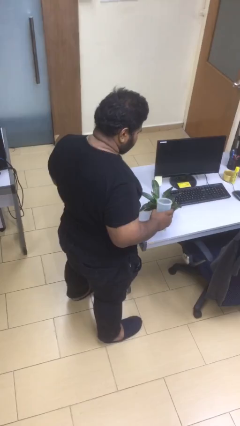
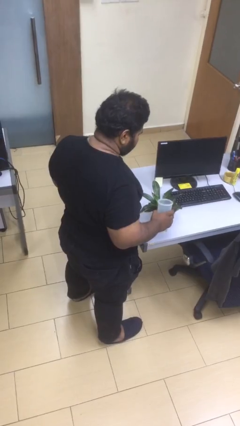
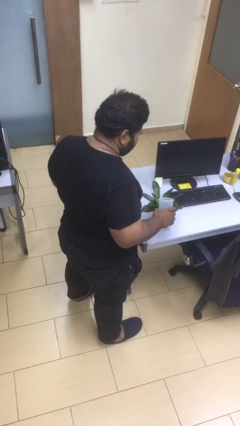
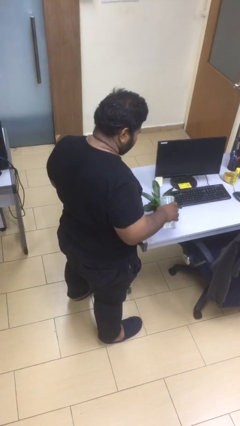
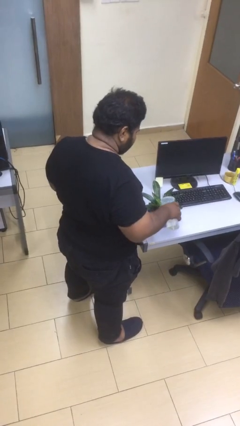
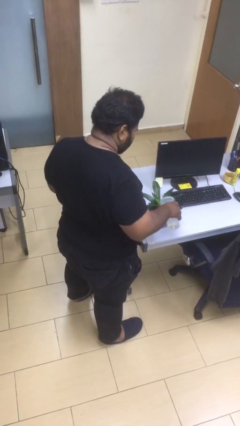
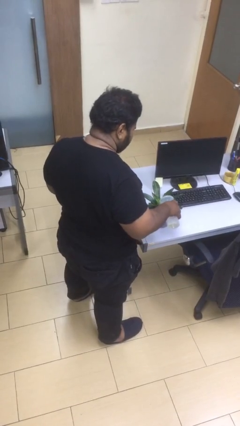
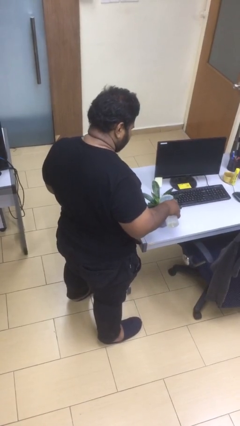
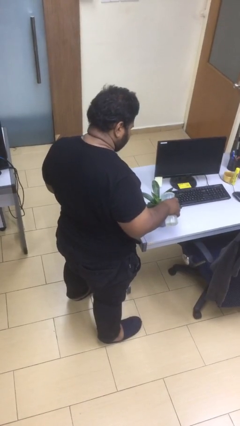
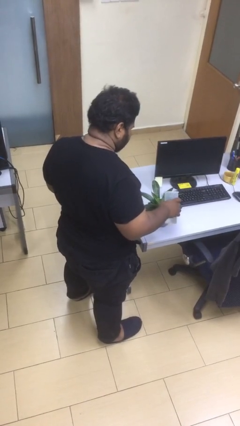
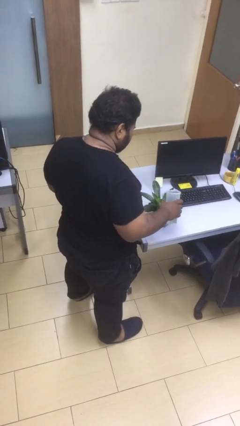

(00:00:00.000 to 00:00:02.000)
person waters houseplant

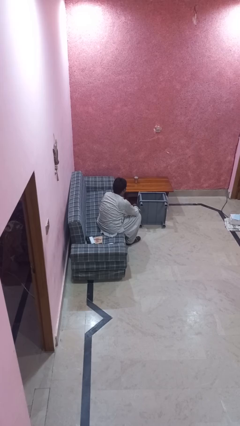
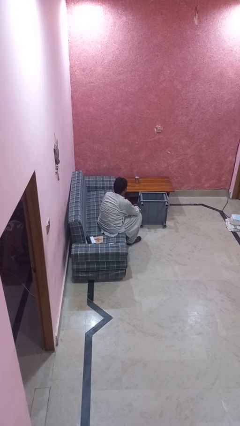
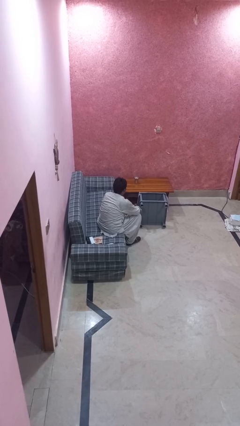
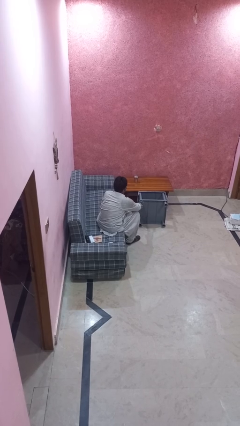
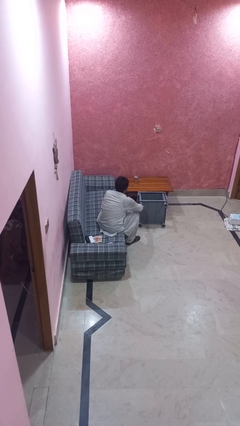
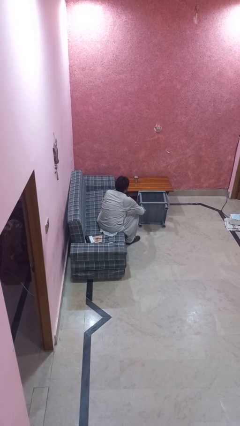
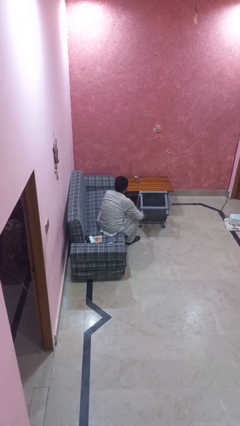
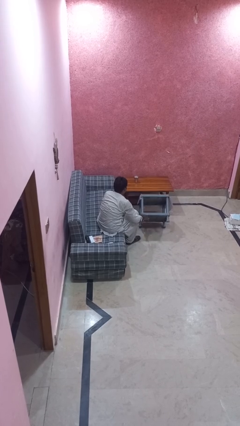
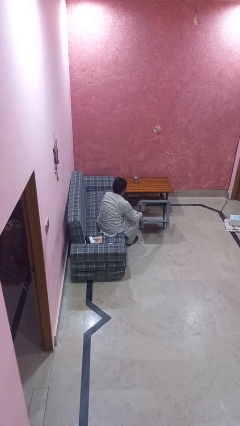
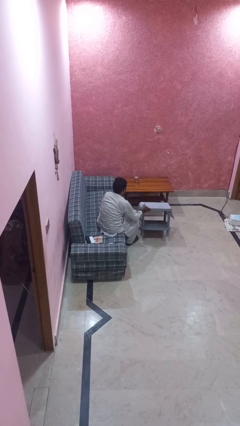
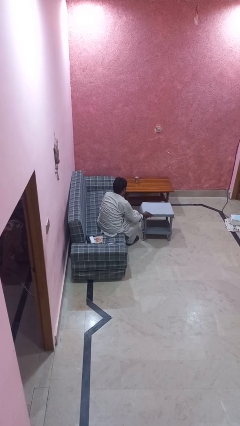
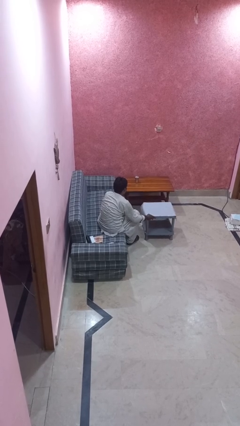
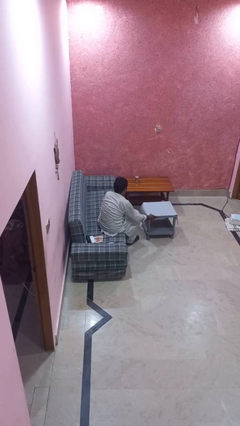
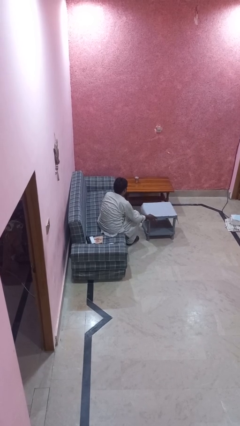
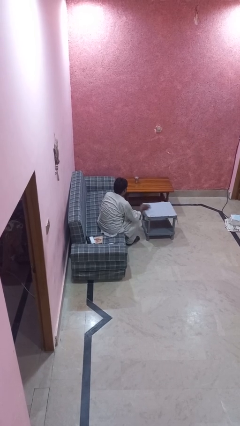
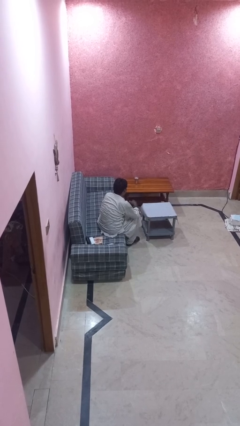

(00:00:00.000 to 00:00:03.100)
person sets upright furniture

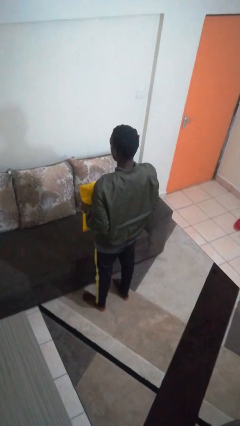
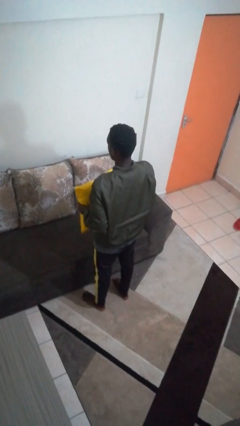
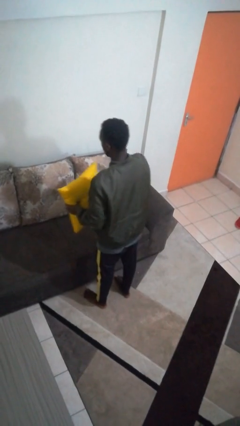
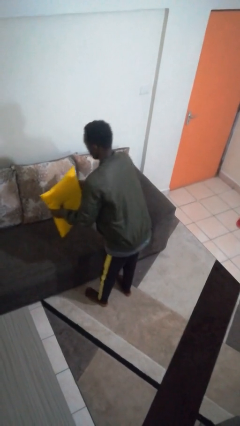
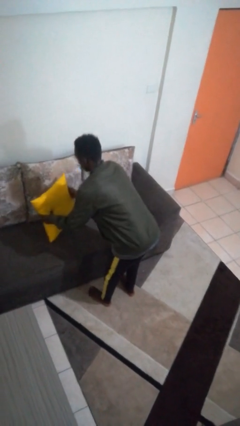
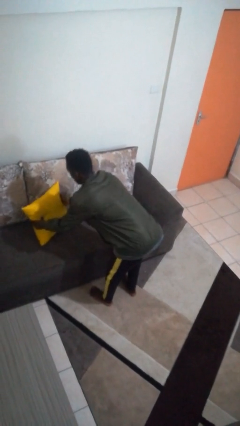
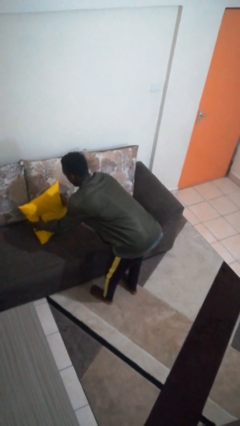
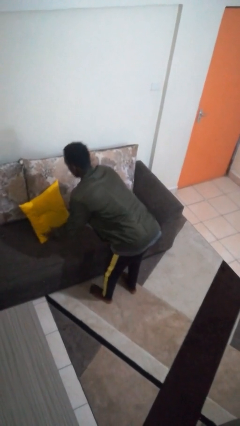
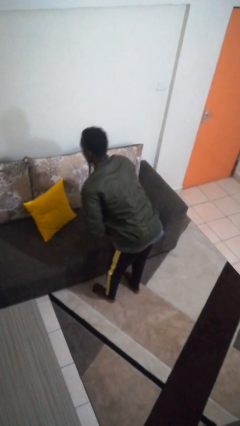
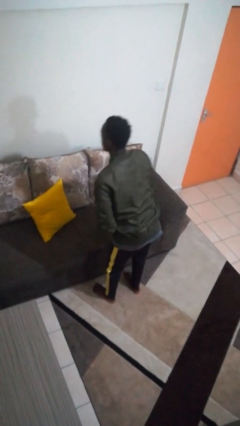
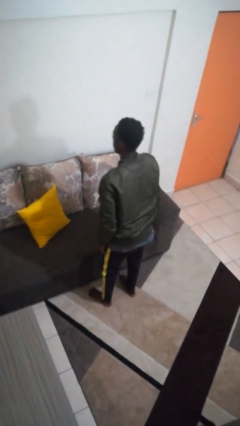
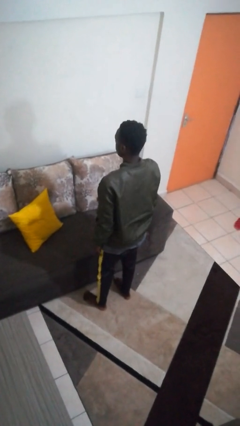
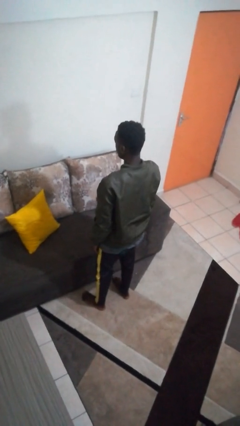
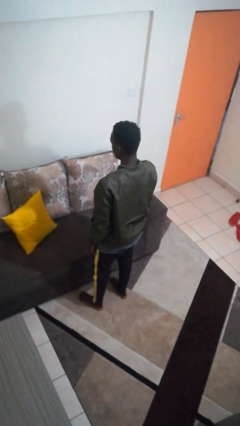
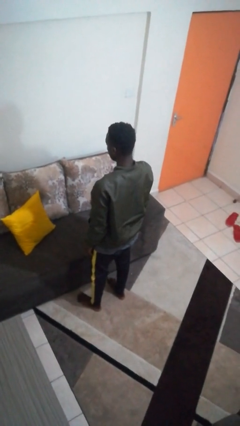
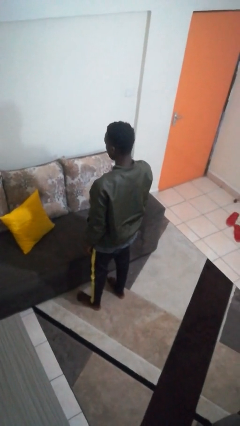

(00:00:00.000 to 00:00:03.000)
person puts down object on couch

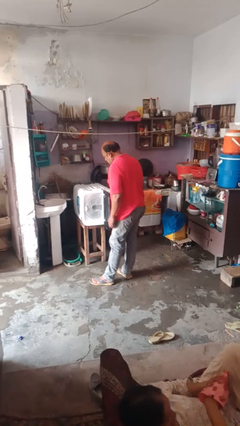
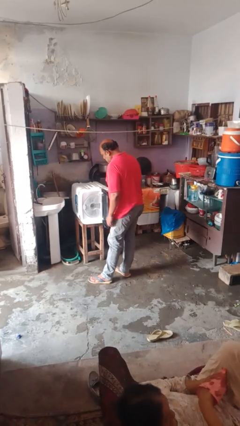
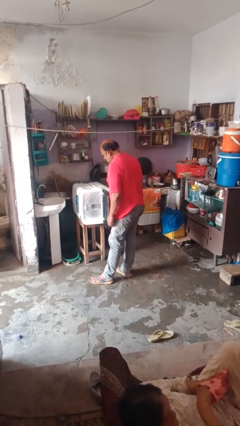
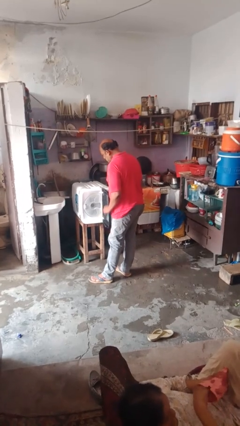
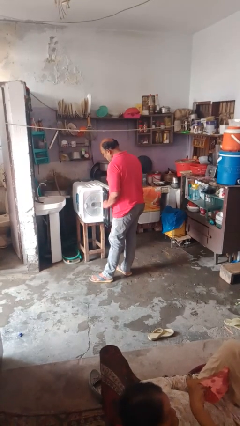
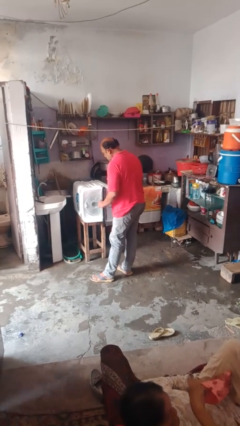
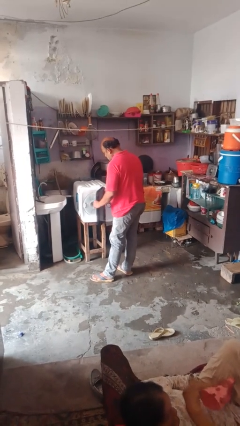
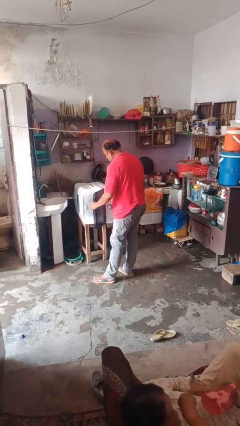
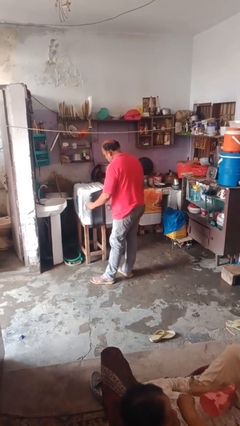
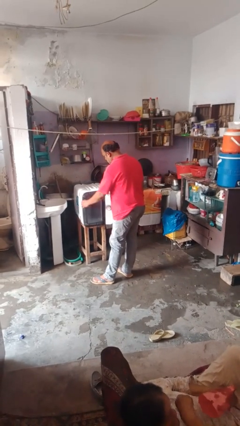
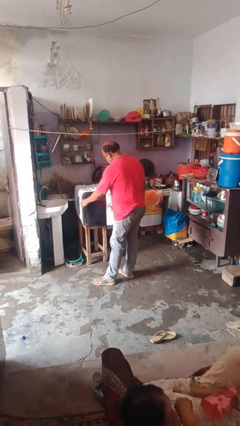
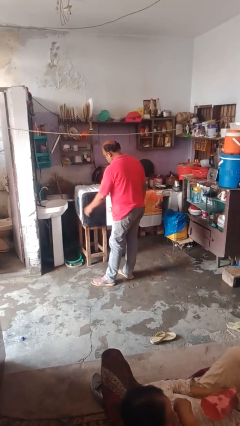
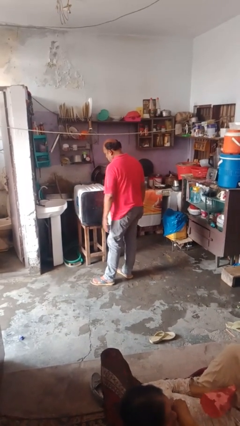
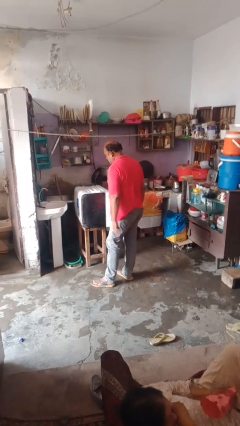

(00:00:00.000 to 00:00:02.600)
person closes dishwasher

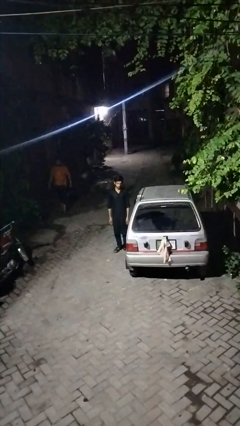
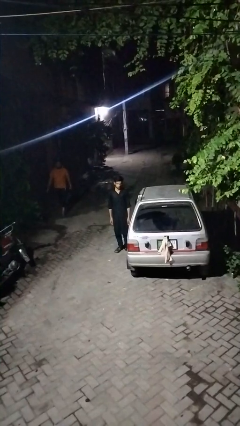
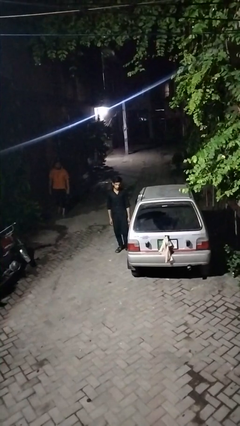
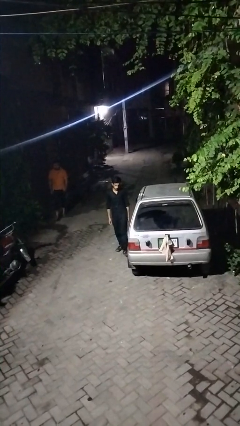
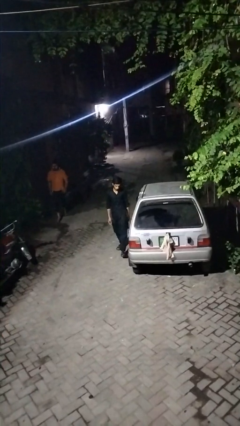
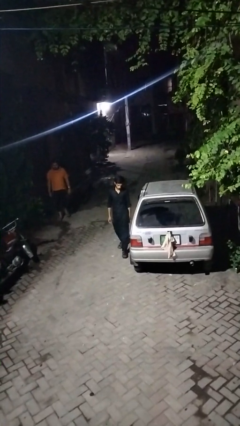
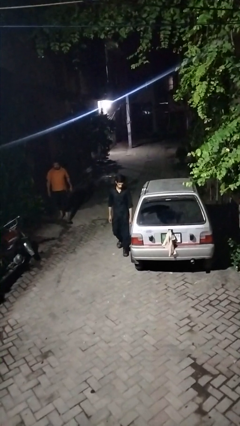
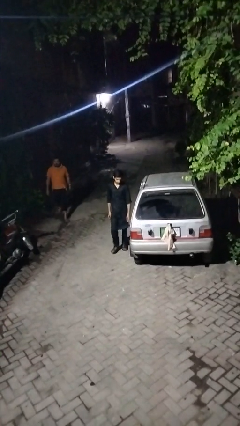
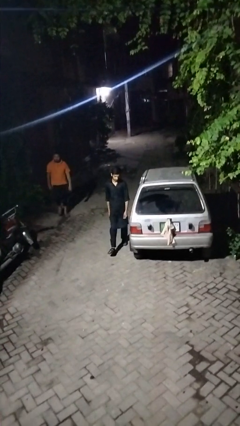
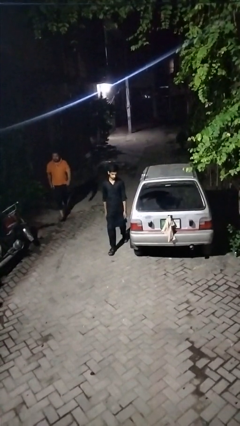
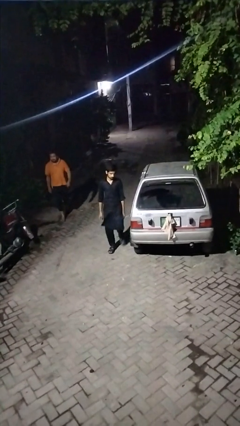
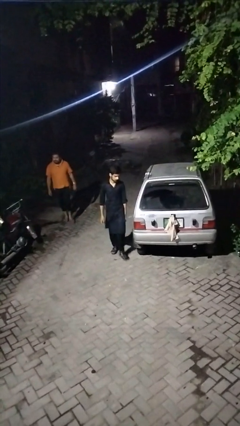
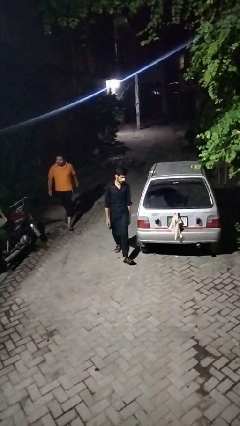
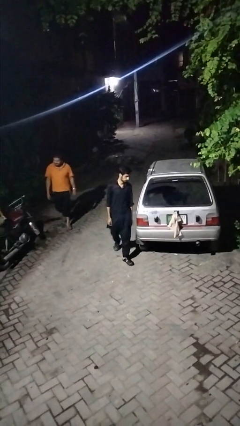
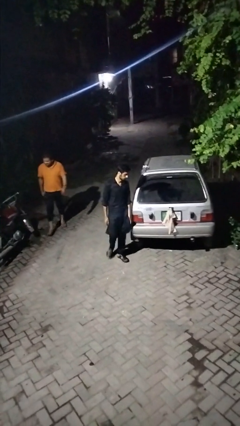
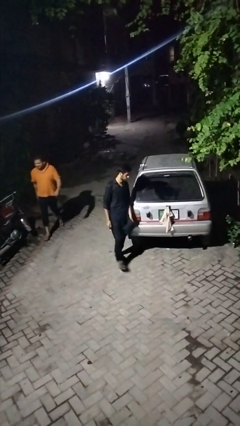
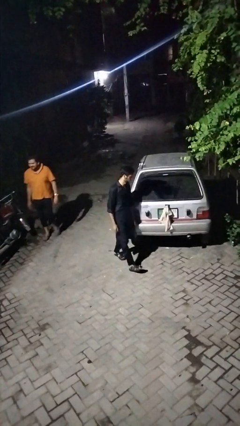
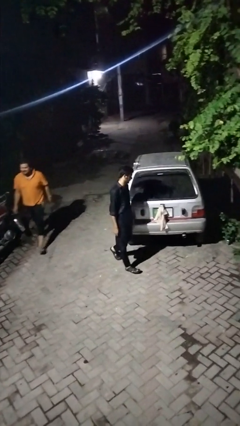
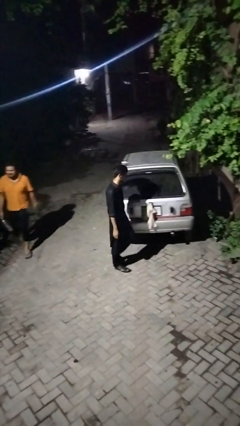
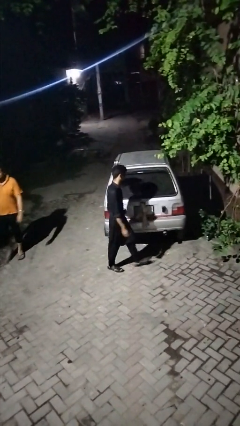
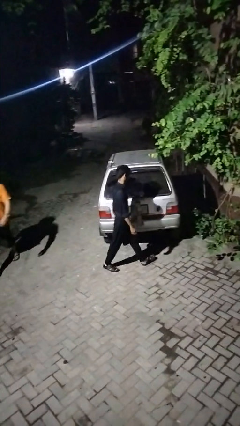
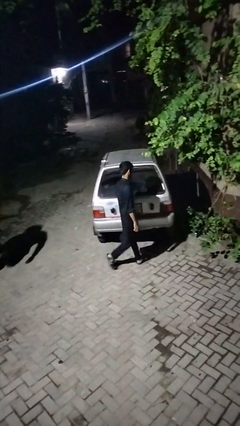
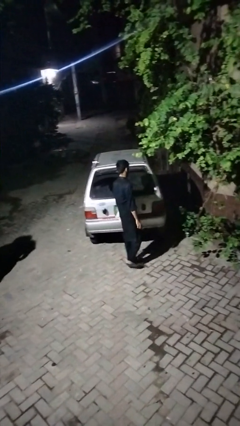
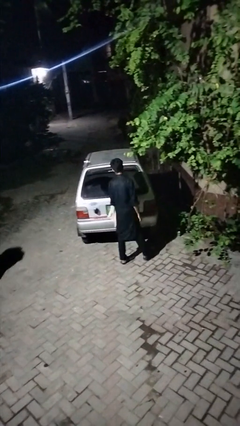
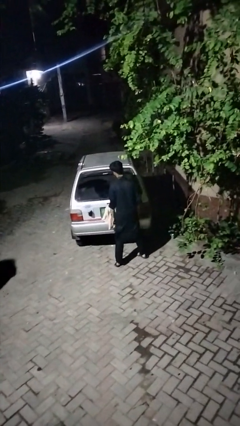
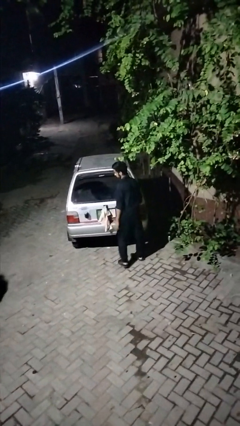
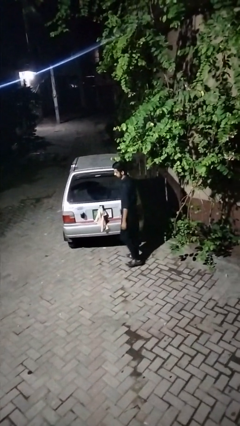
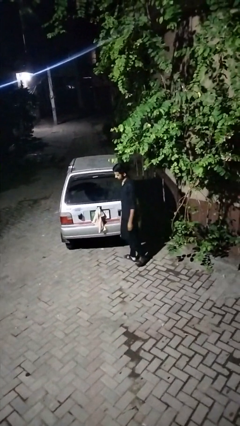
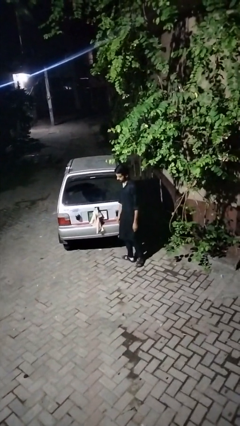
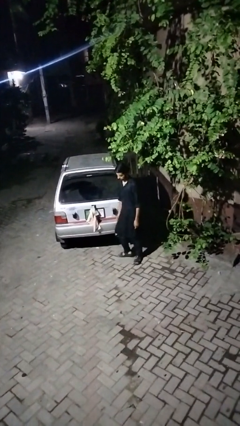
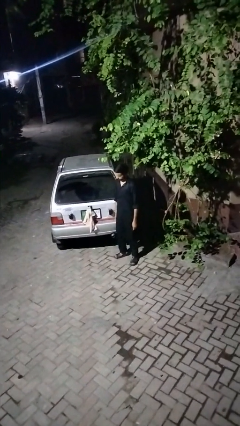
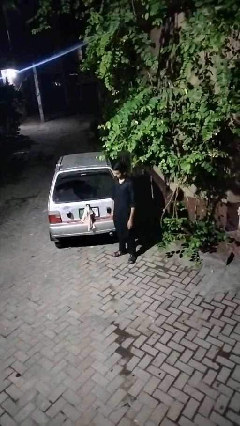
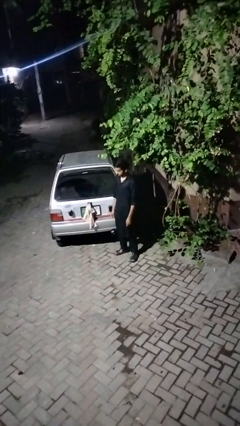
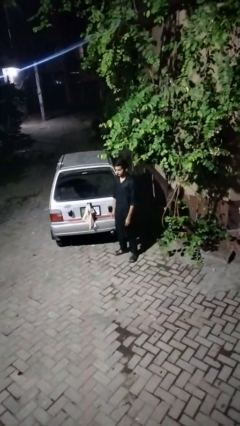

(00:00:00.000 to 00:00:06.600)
person walks around car

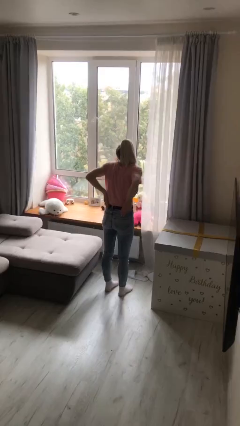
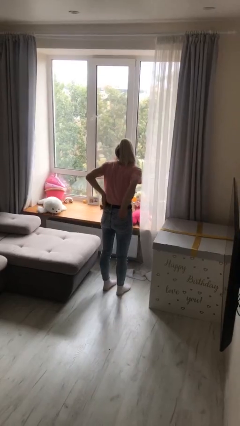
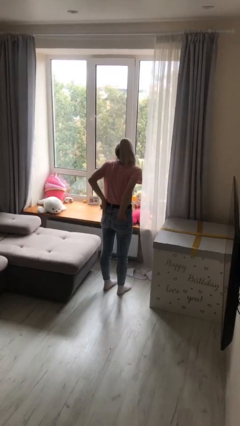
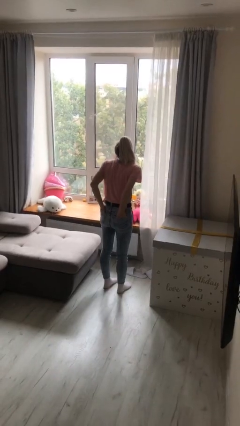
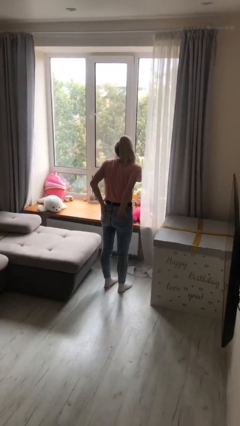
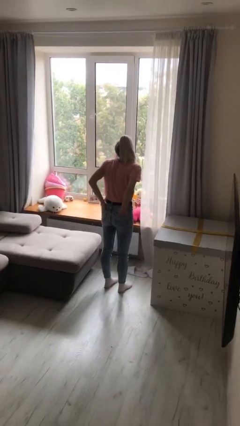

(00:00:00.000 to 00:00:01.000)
person puts hands in back pockets
